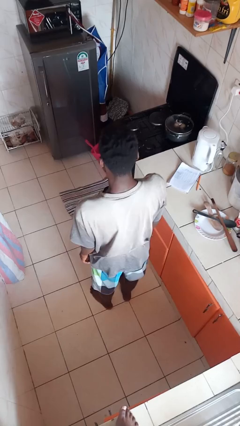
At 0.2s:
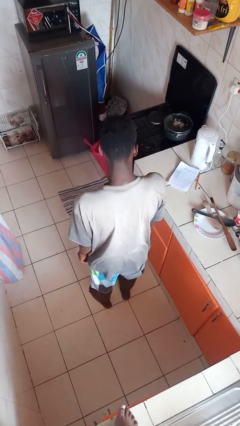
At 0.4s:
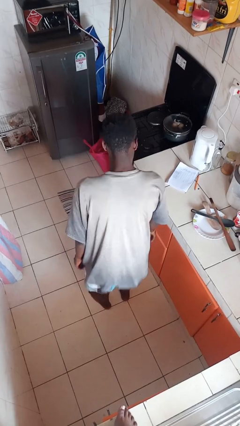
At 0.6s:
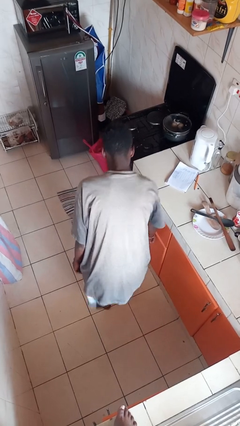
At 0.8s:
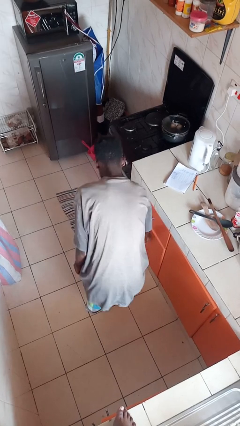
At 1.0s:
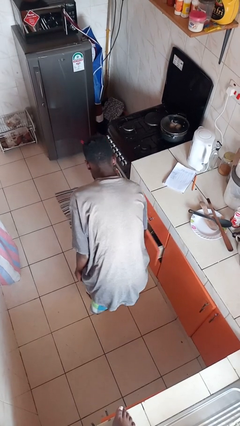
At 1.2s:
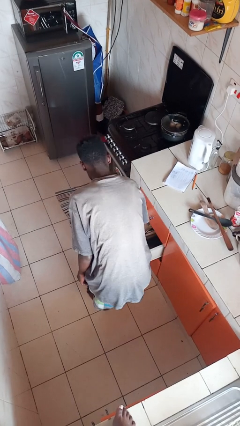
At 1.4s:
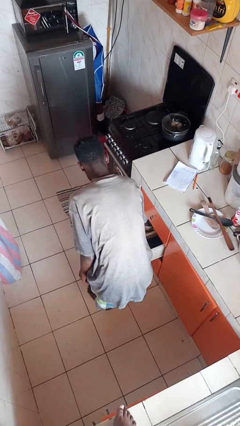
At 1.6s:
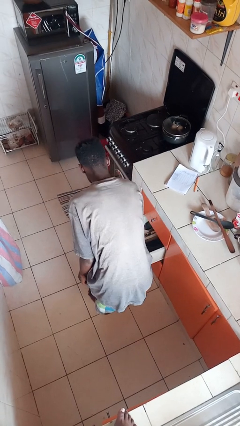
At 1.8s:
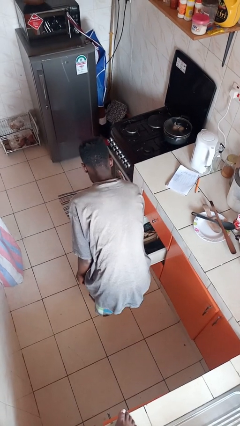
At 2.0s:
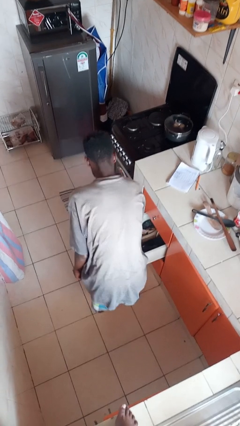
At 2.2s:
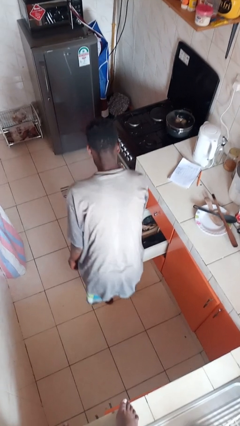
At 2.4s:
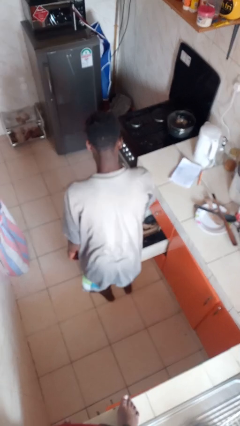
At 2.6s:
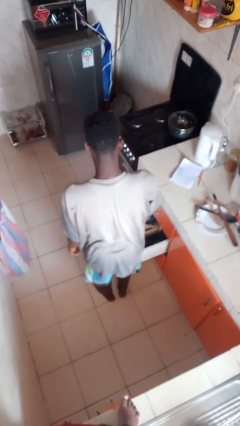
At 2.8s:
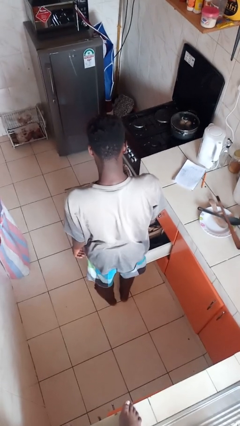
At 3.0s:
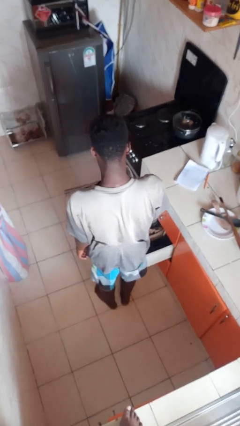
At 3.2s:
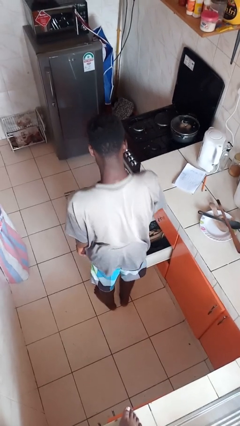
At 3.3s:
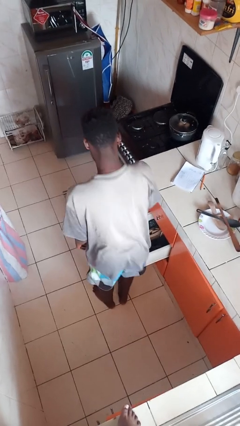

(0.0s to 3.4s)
person opens clothes washer

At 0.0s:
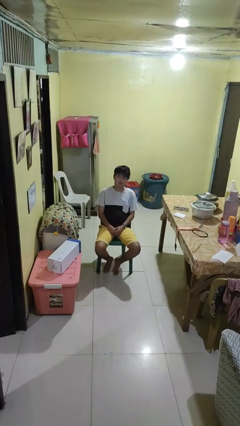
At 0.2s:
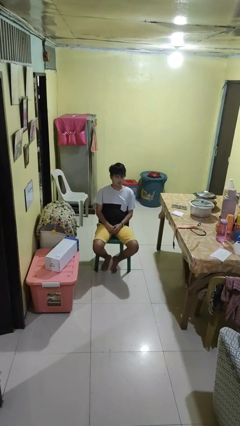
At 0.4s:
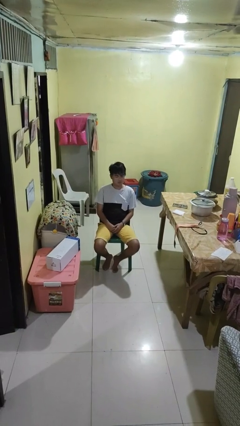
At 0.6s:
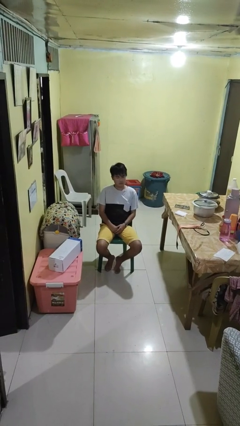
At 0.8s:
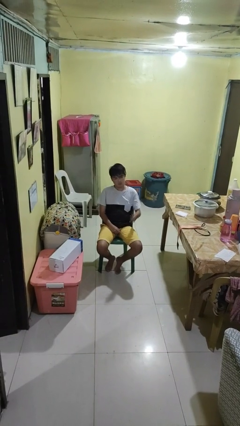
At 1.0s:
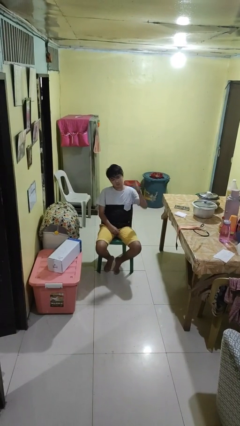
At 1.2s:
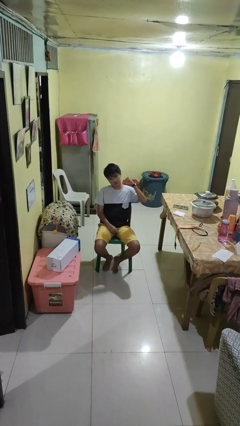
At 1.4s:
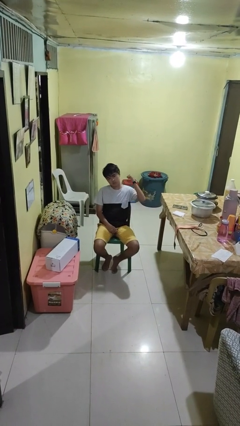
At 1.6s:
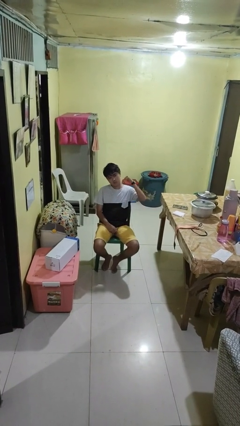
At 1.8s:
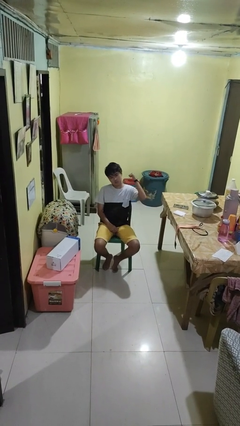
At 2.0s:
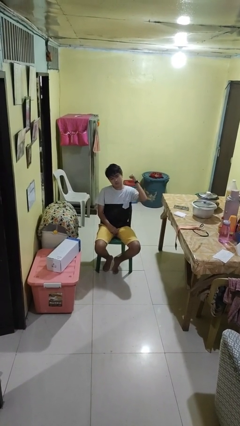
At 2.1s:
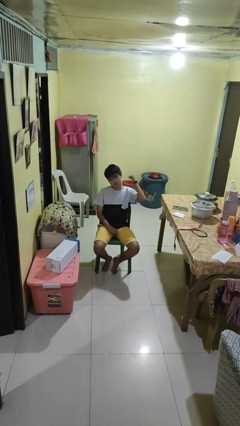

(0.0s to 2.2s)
person gestures behind me

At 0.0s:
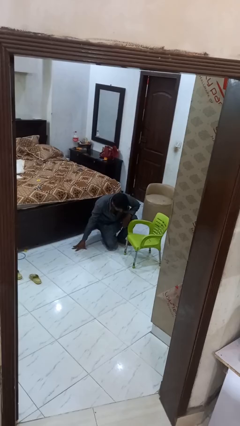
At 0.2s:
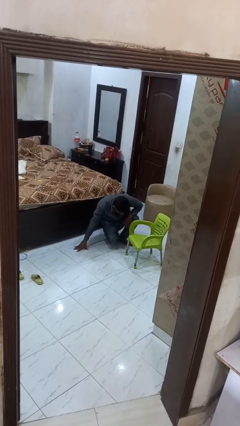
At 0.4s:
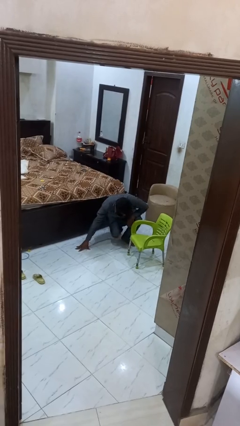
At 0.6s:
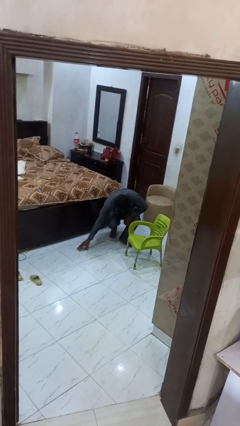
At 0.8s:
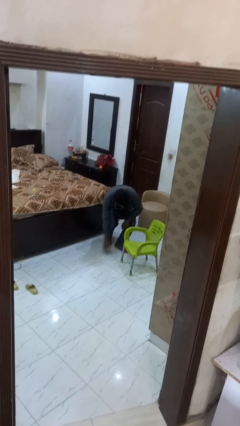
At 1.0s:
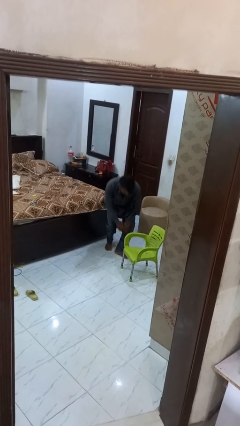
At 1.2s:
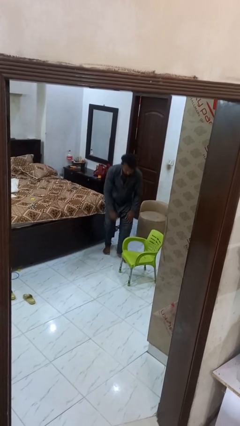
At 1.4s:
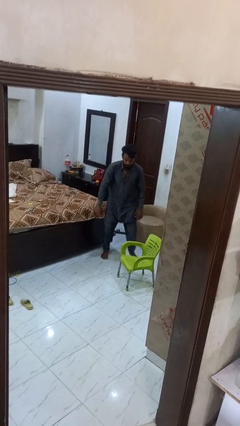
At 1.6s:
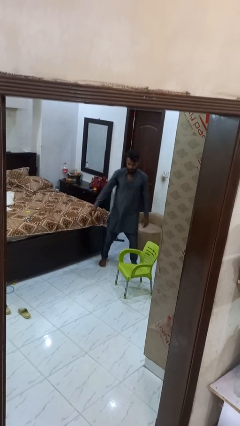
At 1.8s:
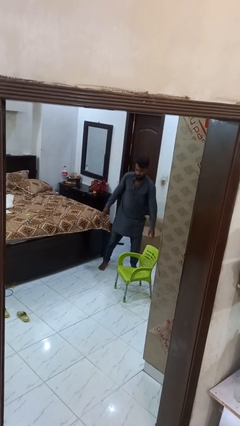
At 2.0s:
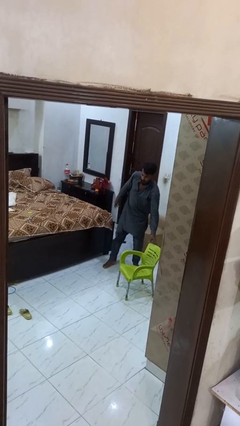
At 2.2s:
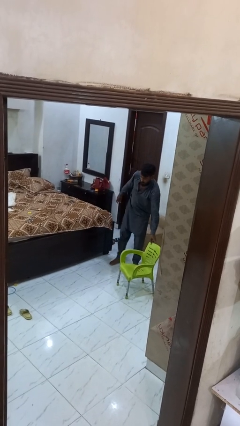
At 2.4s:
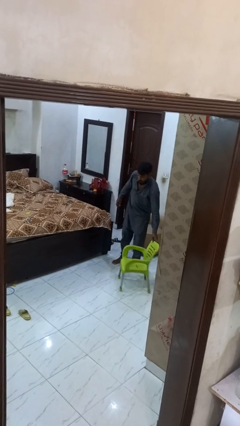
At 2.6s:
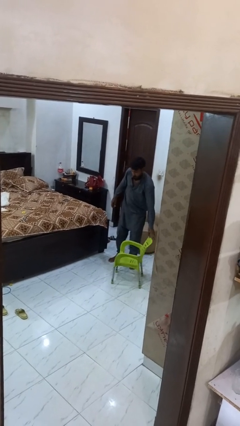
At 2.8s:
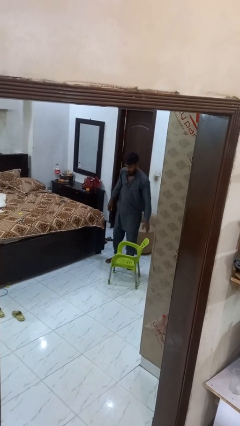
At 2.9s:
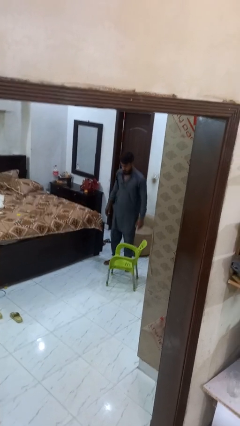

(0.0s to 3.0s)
person stands up from floor

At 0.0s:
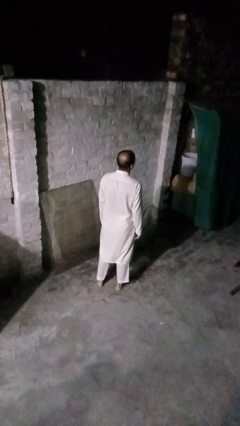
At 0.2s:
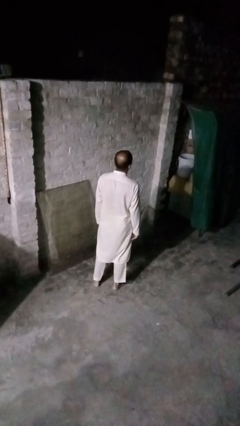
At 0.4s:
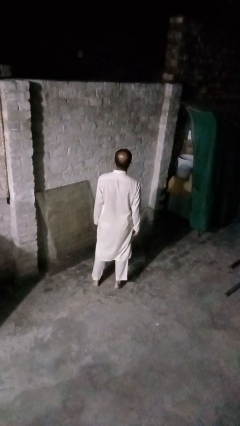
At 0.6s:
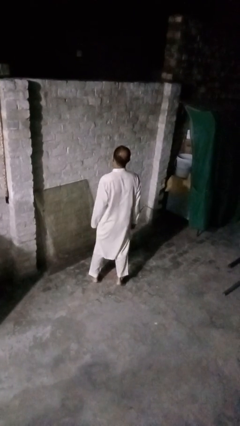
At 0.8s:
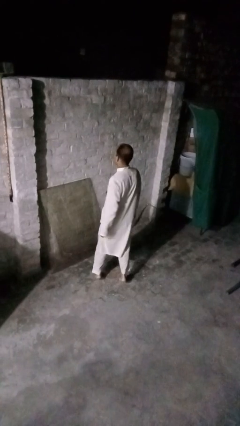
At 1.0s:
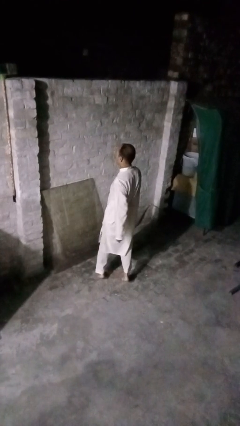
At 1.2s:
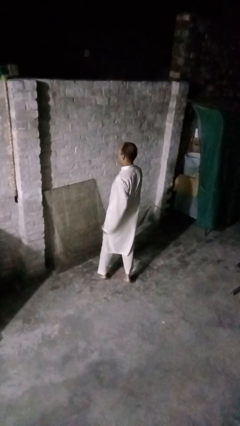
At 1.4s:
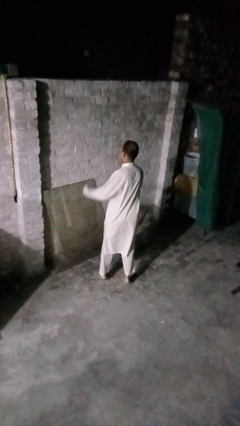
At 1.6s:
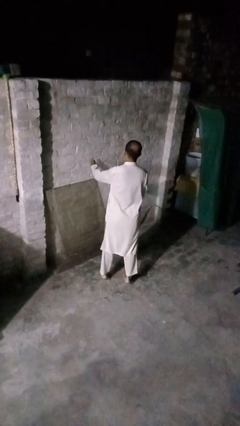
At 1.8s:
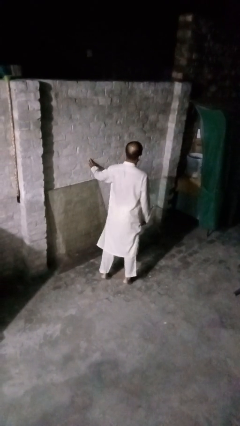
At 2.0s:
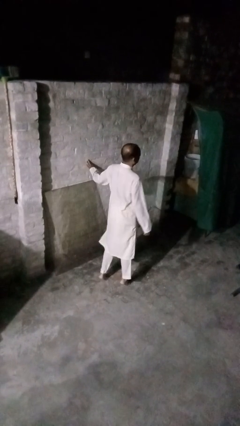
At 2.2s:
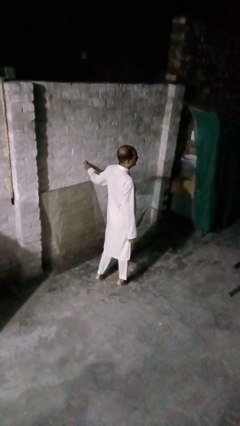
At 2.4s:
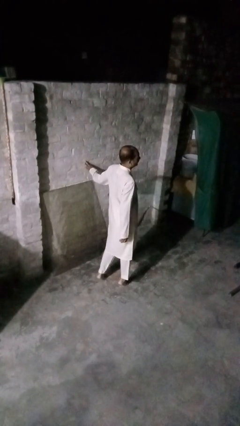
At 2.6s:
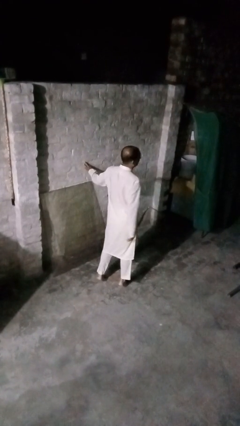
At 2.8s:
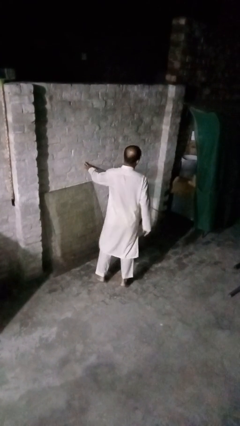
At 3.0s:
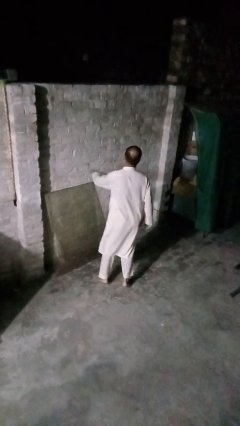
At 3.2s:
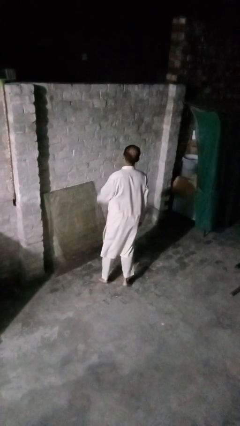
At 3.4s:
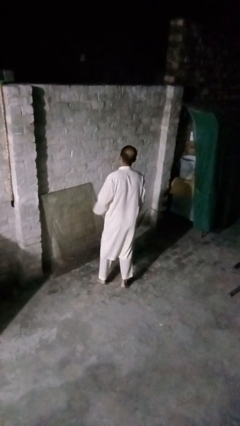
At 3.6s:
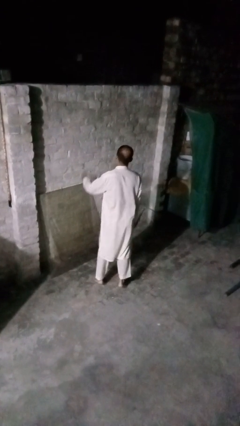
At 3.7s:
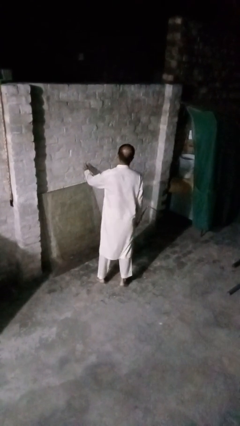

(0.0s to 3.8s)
person twirls

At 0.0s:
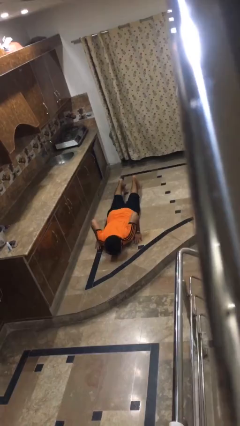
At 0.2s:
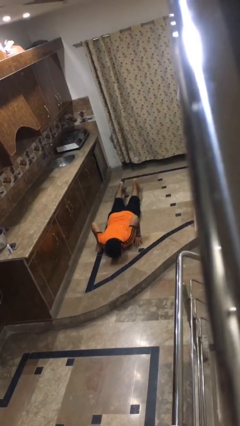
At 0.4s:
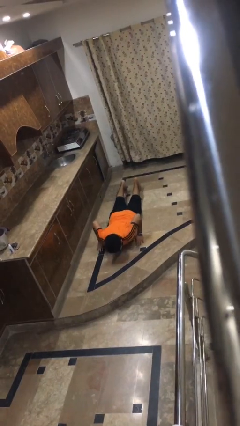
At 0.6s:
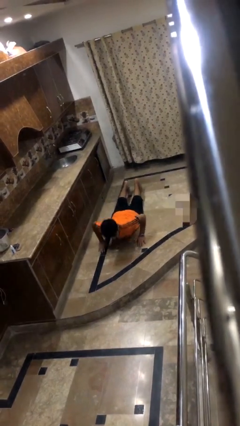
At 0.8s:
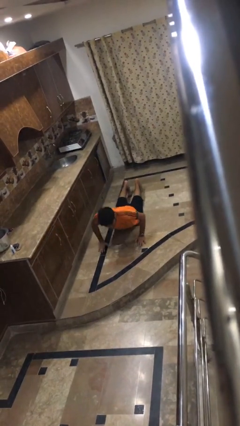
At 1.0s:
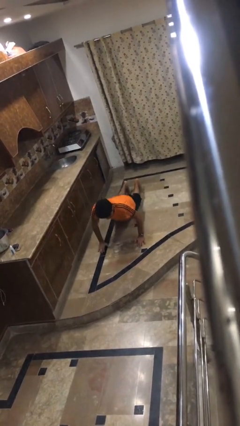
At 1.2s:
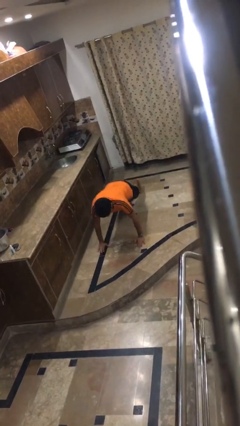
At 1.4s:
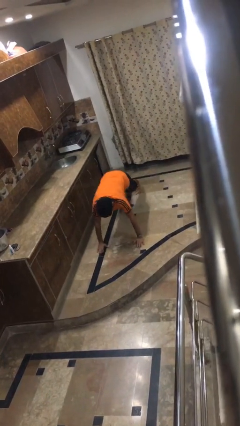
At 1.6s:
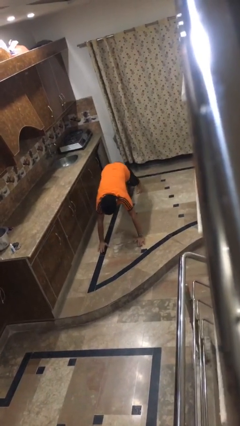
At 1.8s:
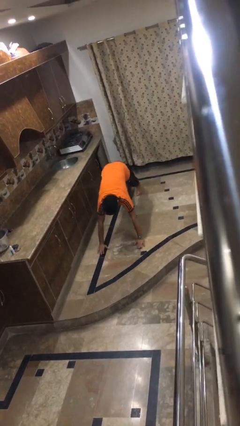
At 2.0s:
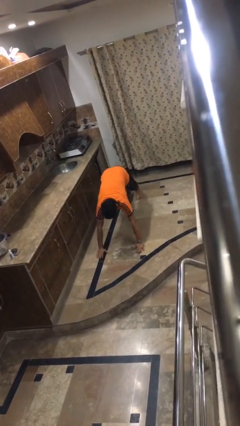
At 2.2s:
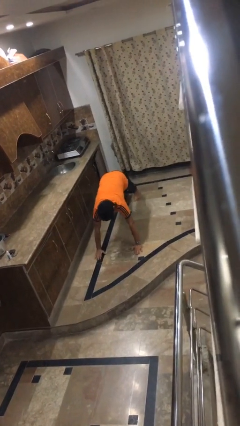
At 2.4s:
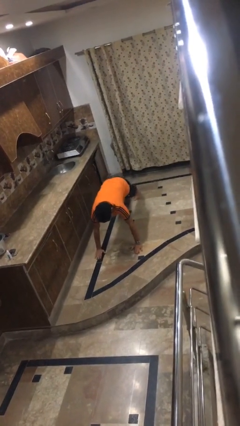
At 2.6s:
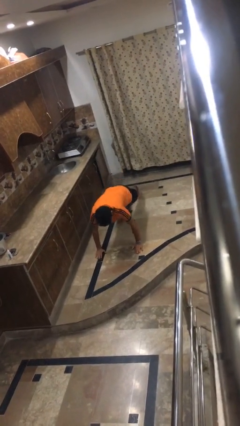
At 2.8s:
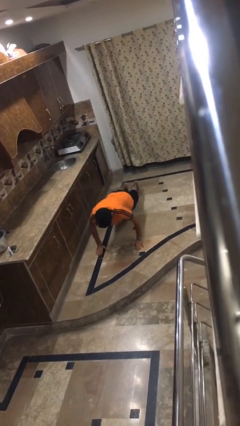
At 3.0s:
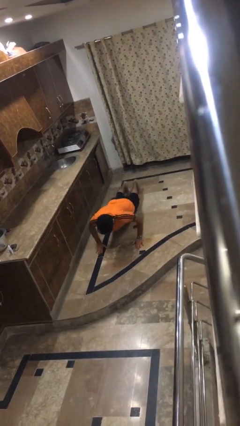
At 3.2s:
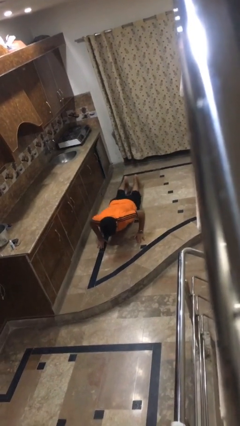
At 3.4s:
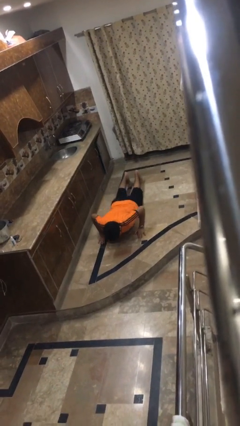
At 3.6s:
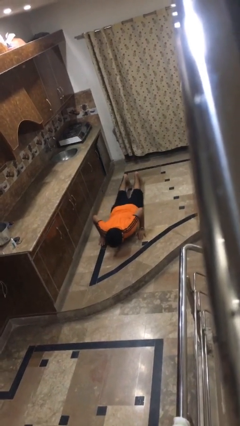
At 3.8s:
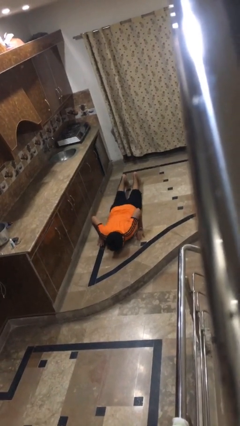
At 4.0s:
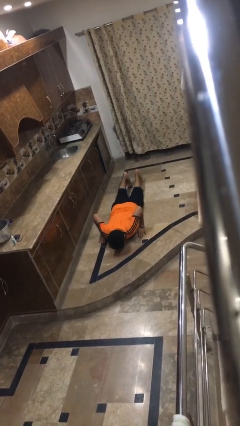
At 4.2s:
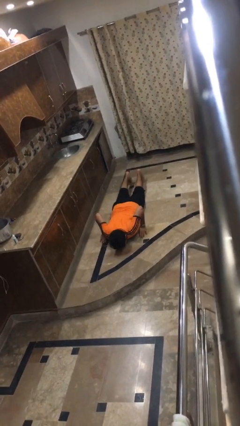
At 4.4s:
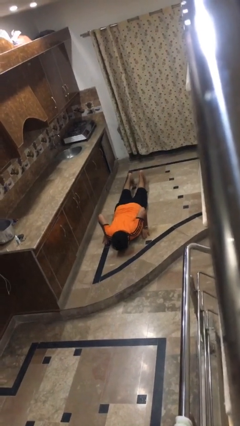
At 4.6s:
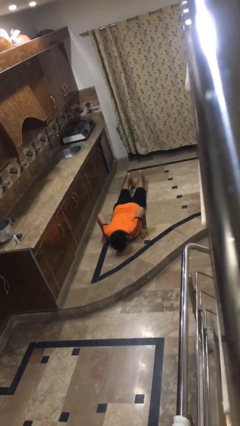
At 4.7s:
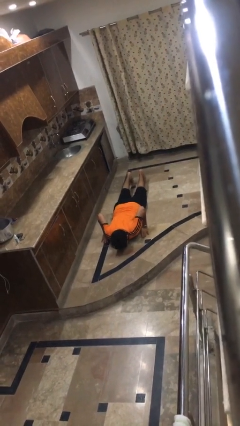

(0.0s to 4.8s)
person exercises with pushup

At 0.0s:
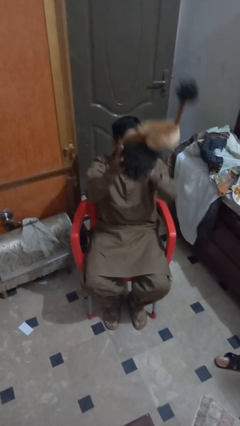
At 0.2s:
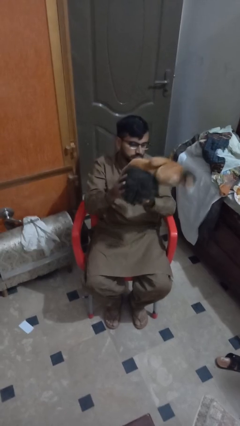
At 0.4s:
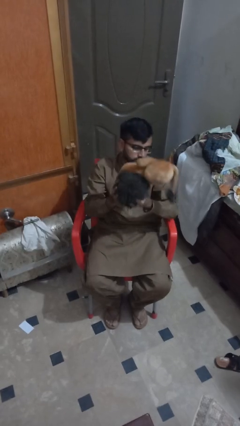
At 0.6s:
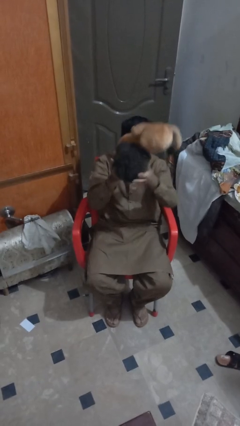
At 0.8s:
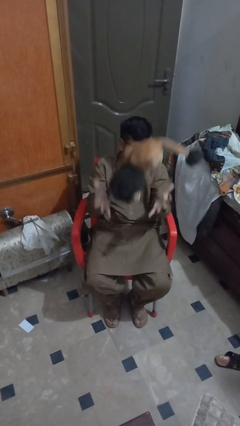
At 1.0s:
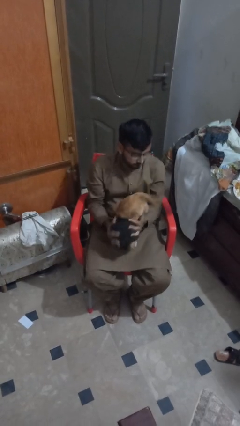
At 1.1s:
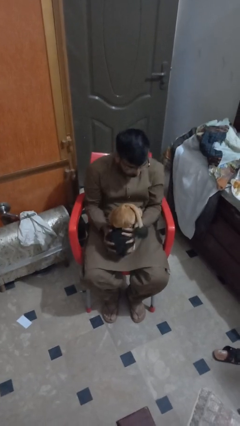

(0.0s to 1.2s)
person catches dropped object
